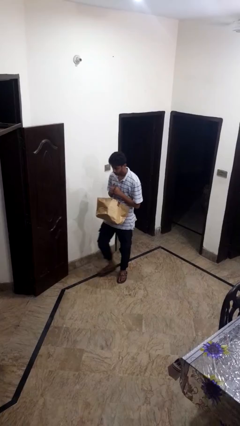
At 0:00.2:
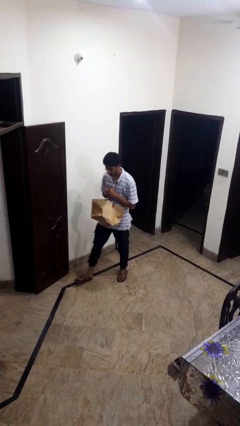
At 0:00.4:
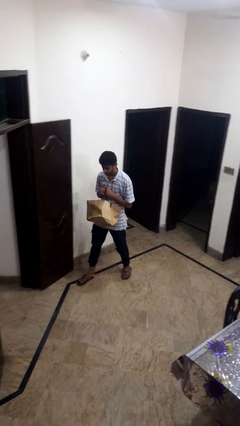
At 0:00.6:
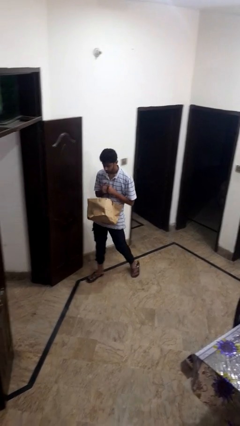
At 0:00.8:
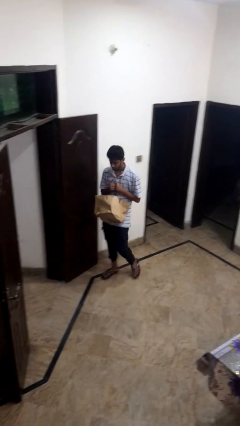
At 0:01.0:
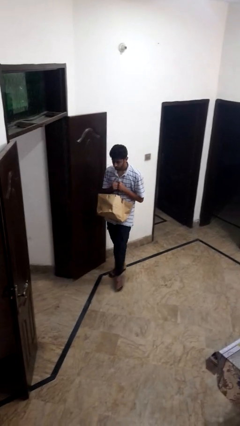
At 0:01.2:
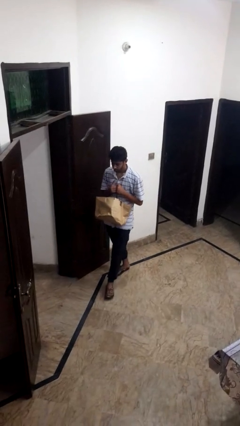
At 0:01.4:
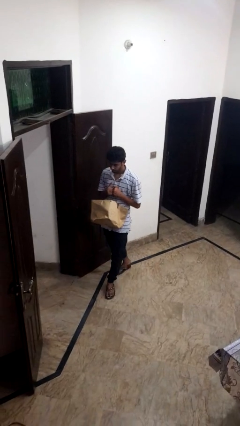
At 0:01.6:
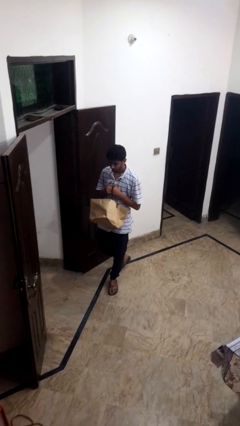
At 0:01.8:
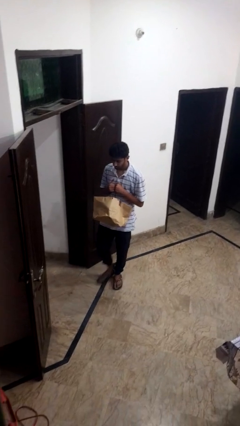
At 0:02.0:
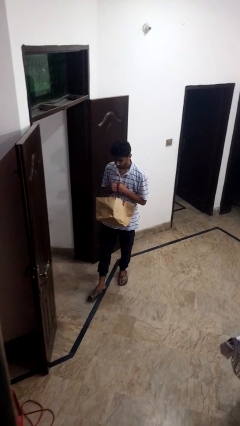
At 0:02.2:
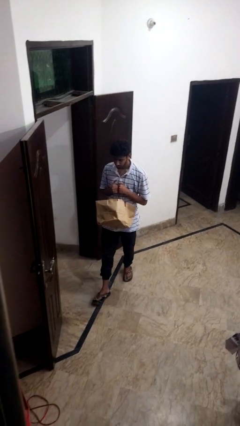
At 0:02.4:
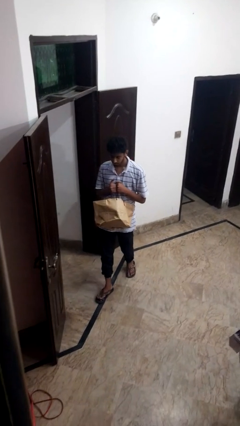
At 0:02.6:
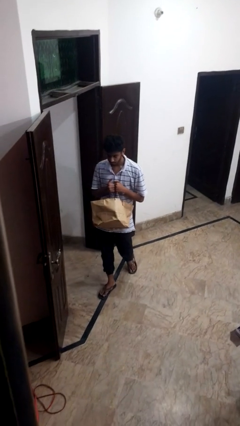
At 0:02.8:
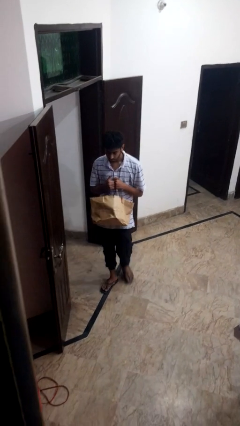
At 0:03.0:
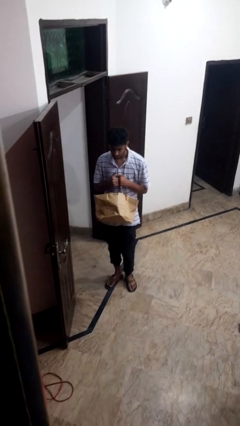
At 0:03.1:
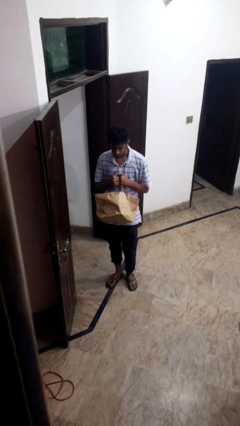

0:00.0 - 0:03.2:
person carries groceries

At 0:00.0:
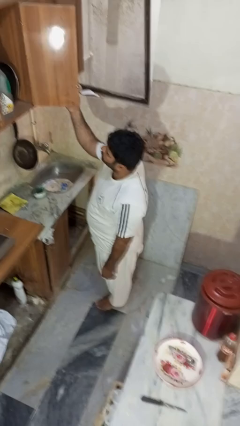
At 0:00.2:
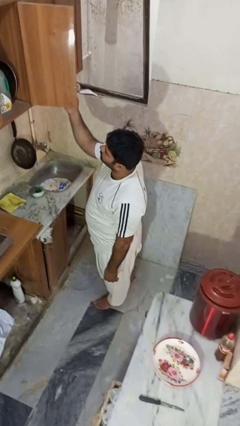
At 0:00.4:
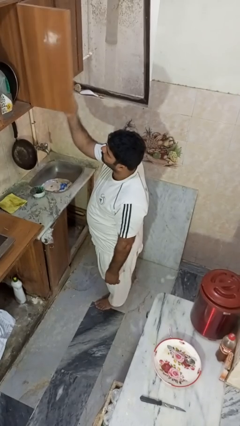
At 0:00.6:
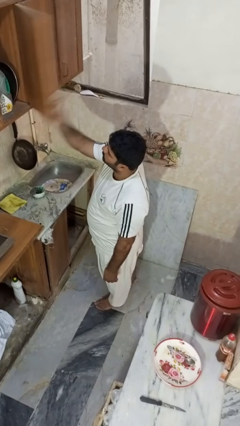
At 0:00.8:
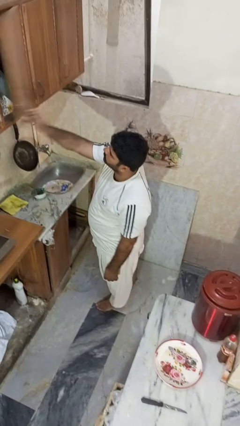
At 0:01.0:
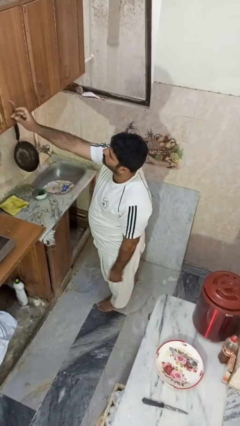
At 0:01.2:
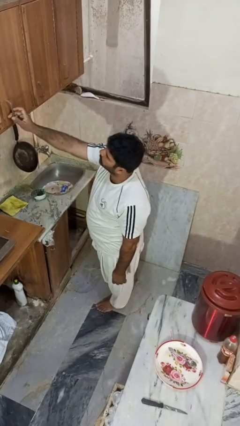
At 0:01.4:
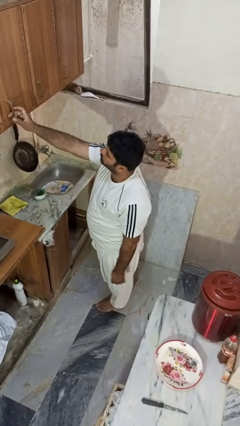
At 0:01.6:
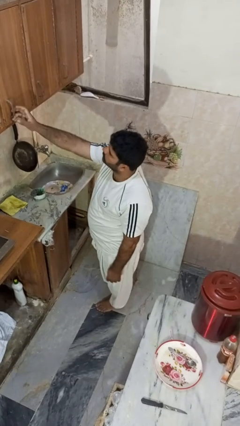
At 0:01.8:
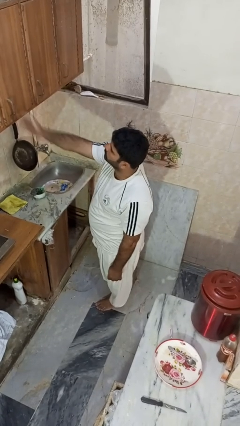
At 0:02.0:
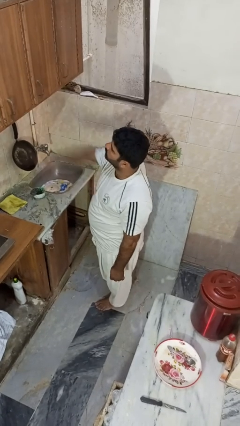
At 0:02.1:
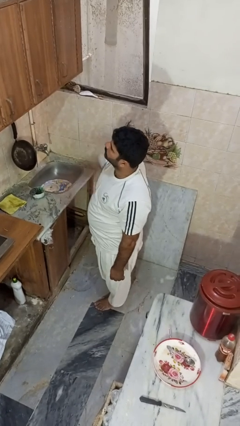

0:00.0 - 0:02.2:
person closes cabinet

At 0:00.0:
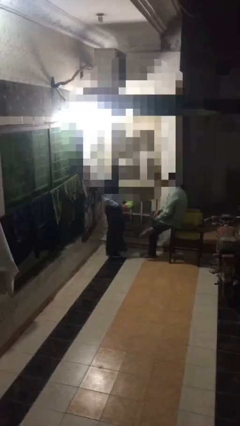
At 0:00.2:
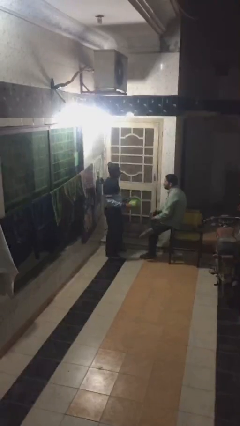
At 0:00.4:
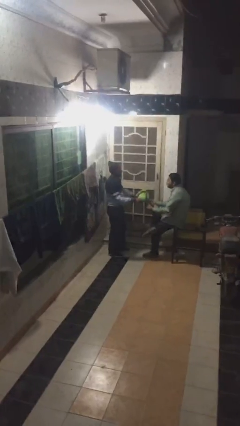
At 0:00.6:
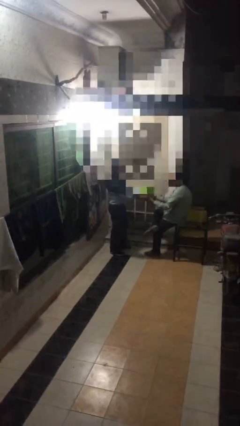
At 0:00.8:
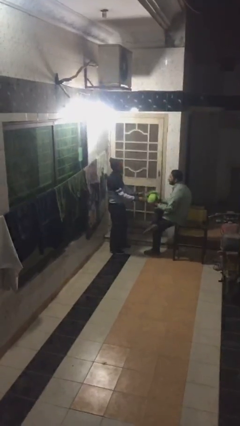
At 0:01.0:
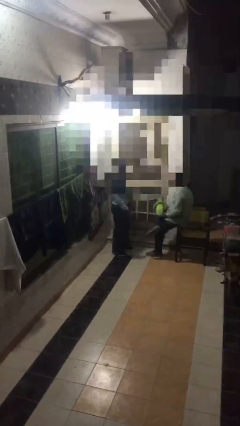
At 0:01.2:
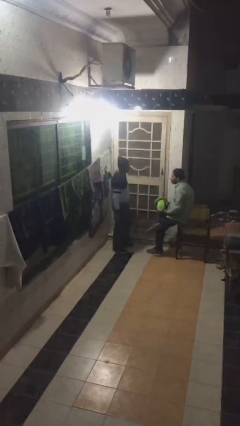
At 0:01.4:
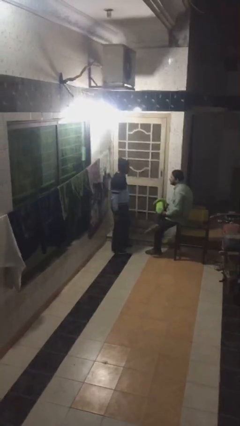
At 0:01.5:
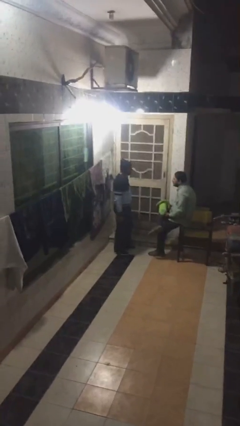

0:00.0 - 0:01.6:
person transfers object to person

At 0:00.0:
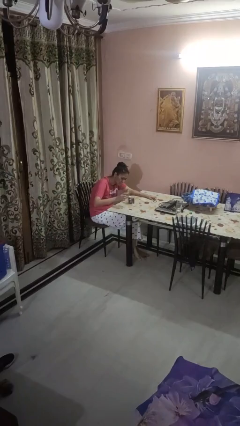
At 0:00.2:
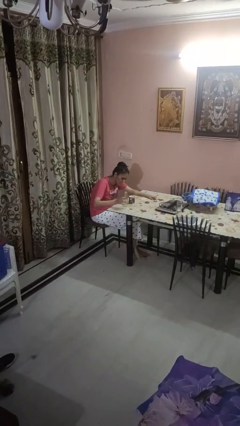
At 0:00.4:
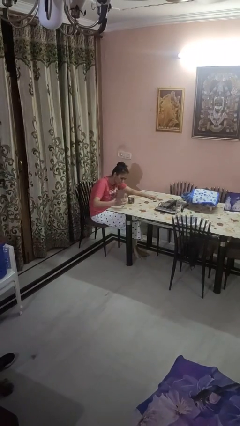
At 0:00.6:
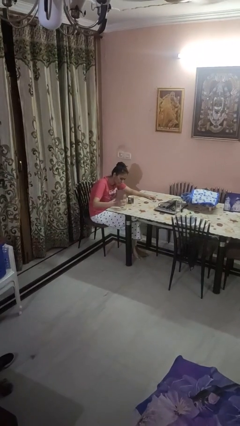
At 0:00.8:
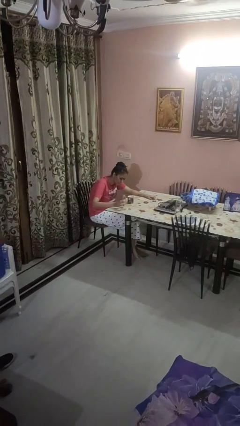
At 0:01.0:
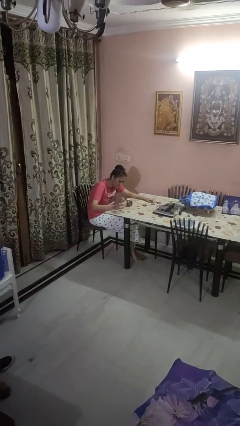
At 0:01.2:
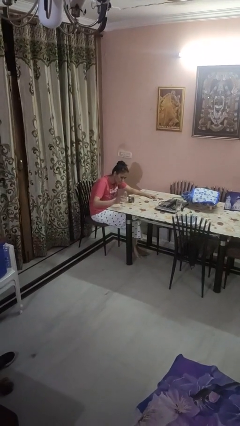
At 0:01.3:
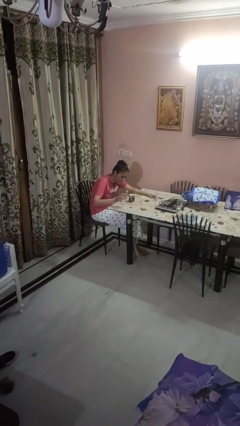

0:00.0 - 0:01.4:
person pours liquid into cup

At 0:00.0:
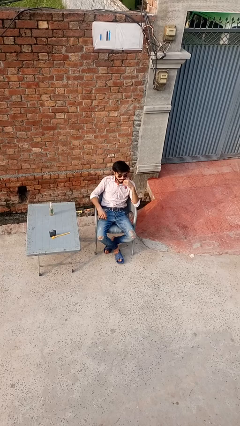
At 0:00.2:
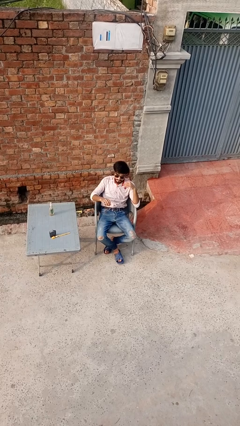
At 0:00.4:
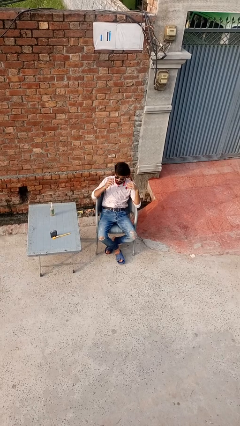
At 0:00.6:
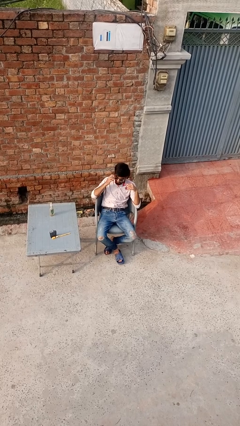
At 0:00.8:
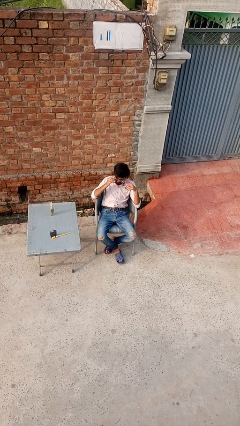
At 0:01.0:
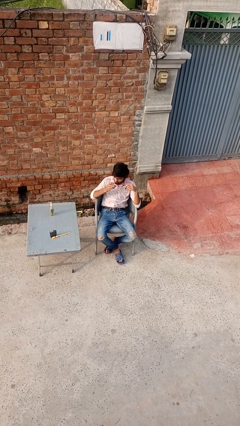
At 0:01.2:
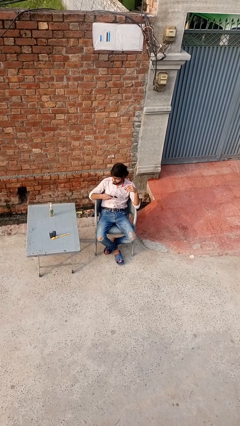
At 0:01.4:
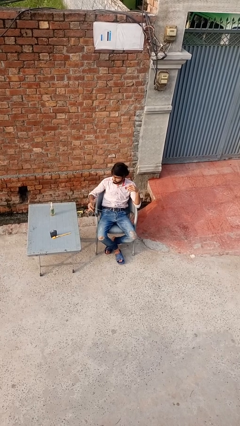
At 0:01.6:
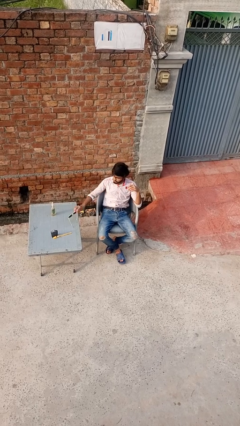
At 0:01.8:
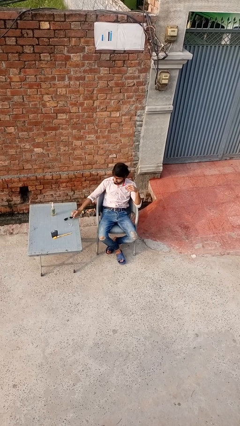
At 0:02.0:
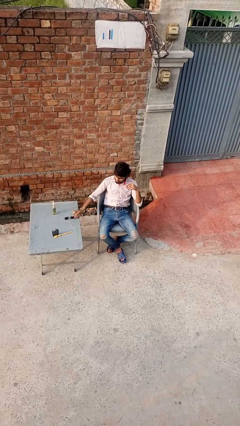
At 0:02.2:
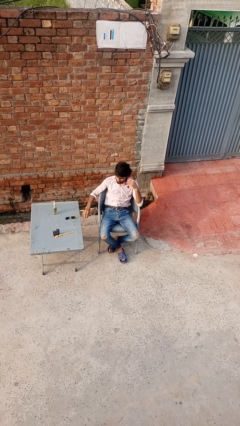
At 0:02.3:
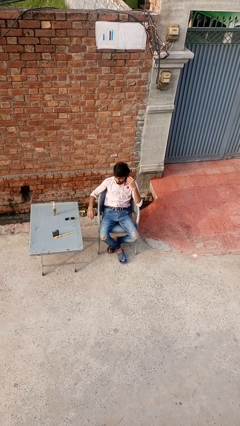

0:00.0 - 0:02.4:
person takes off sunglasses

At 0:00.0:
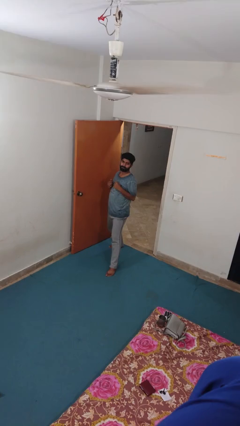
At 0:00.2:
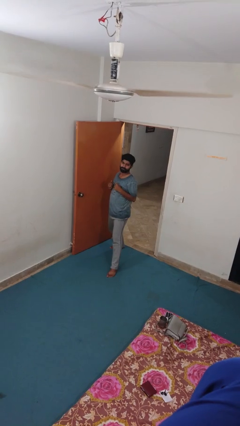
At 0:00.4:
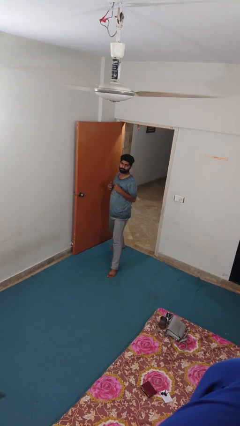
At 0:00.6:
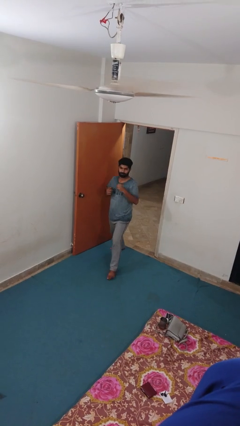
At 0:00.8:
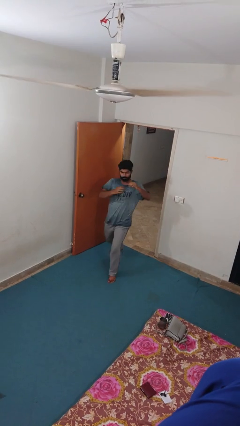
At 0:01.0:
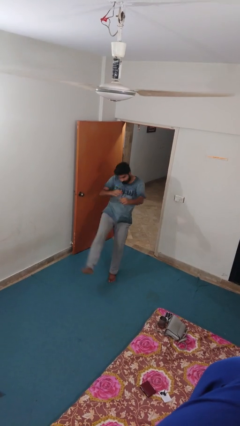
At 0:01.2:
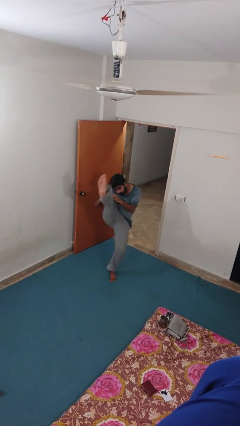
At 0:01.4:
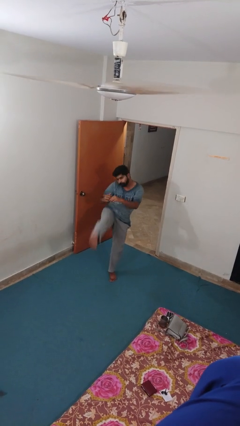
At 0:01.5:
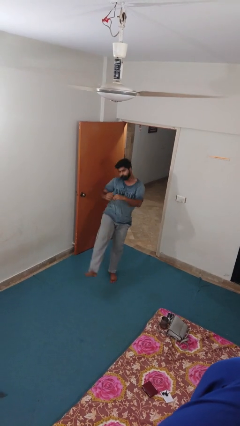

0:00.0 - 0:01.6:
person karate kicks

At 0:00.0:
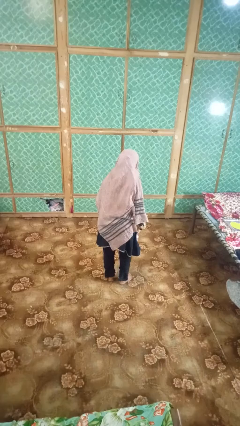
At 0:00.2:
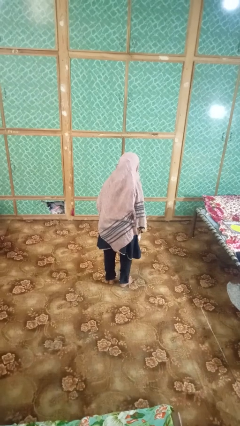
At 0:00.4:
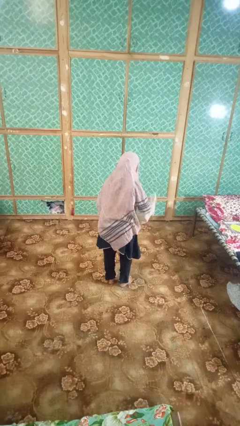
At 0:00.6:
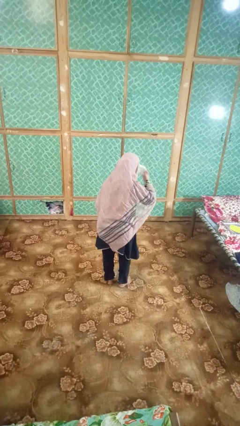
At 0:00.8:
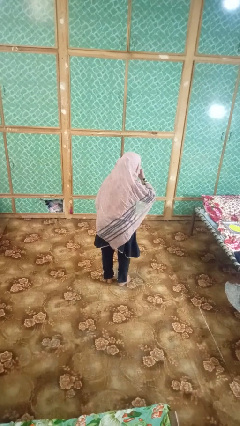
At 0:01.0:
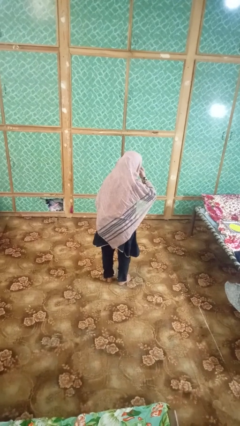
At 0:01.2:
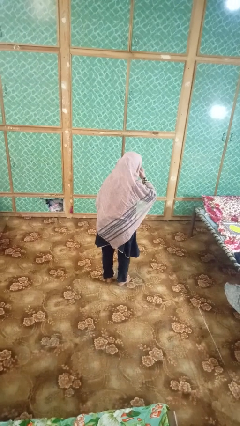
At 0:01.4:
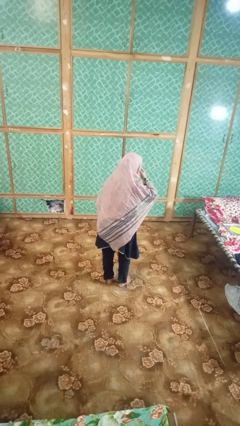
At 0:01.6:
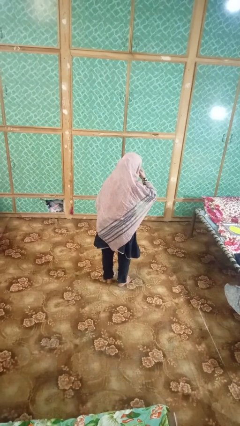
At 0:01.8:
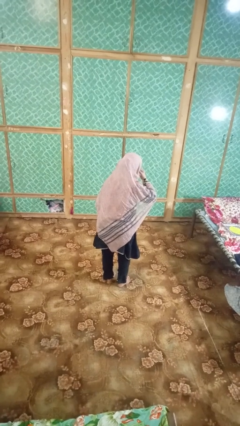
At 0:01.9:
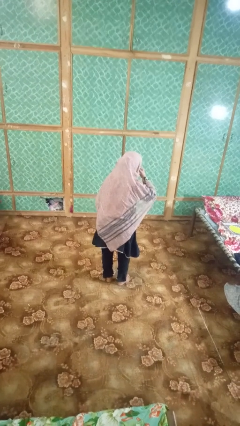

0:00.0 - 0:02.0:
person blows nose

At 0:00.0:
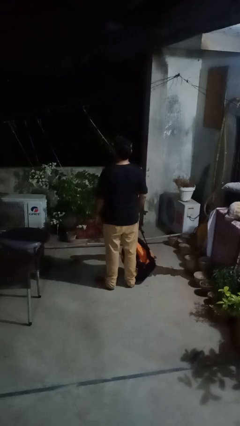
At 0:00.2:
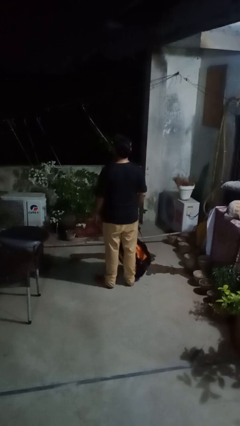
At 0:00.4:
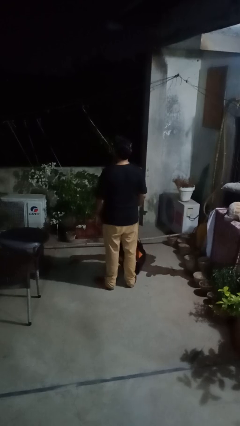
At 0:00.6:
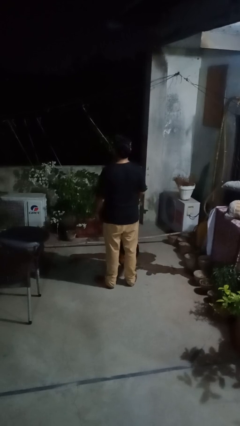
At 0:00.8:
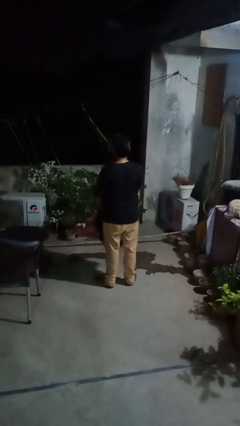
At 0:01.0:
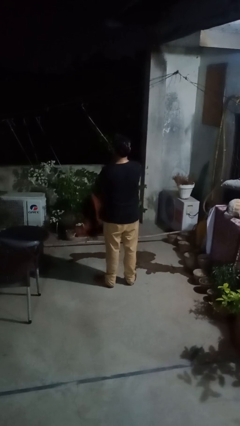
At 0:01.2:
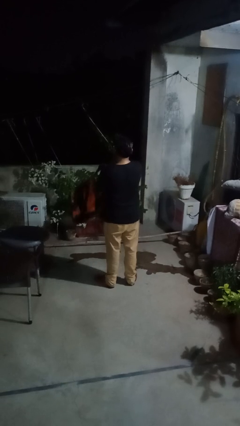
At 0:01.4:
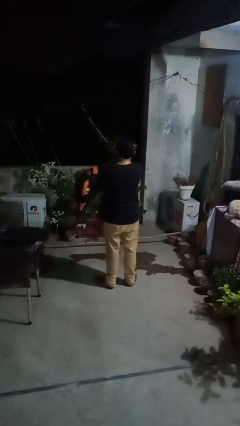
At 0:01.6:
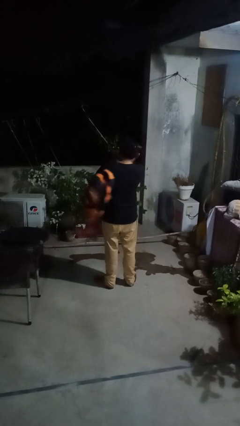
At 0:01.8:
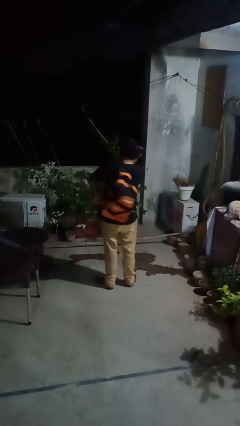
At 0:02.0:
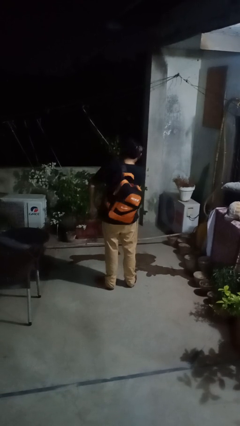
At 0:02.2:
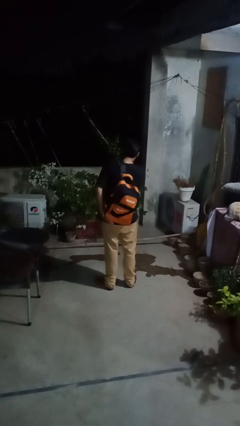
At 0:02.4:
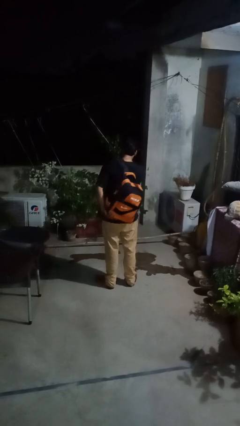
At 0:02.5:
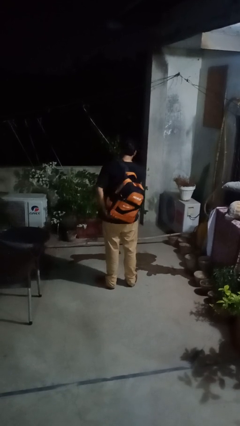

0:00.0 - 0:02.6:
person puts on backpack
